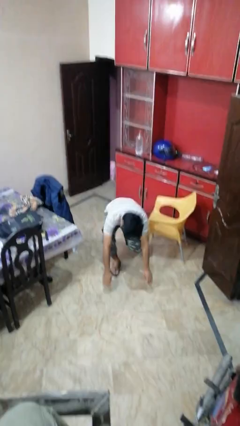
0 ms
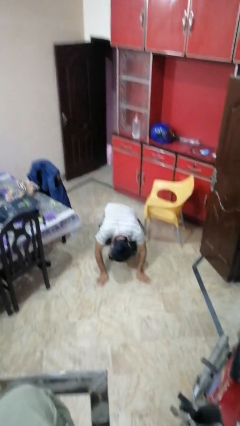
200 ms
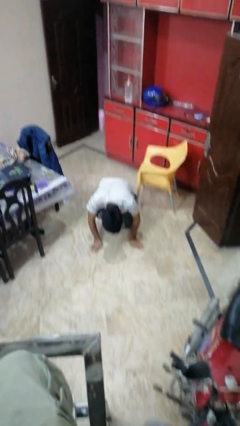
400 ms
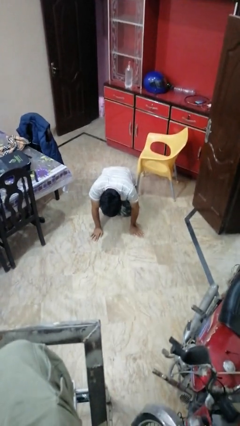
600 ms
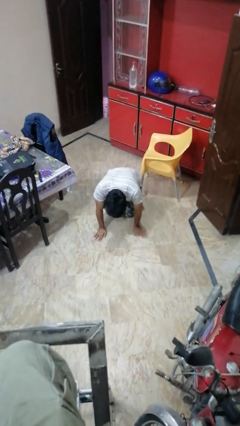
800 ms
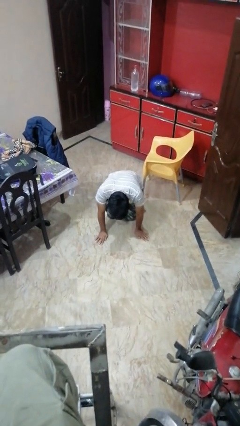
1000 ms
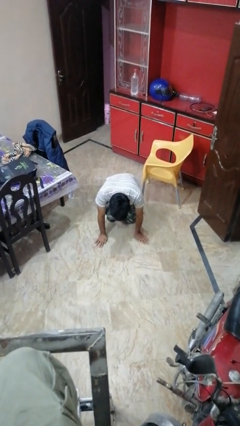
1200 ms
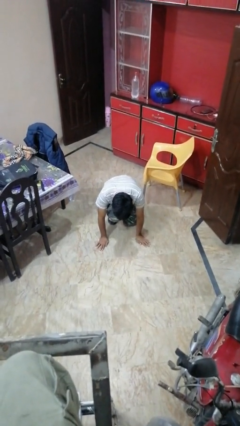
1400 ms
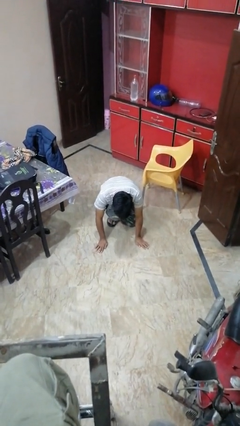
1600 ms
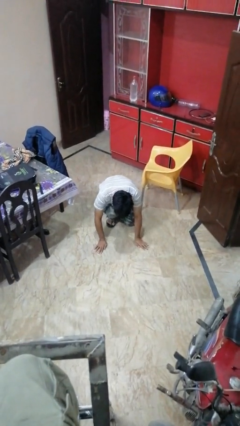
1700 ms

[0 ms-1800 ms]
person trips on object on floor

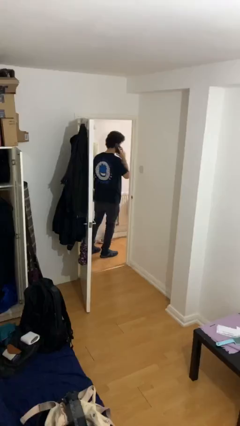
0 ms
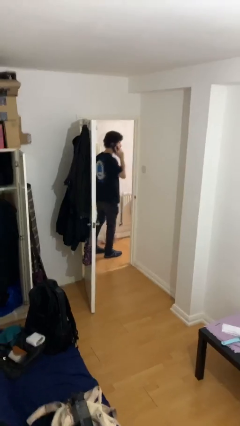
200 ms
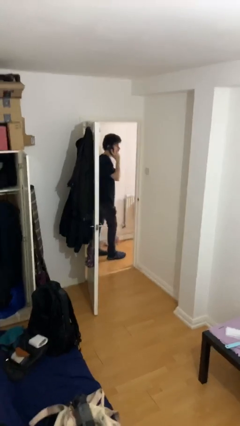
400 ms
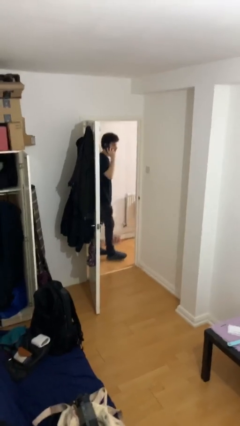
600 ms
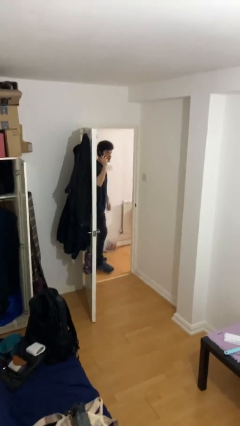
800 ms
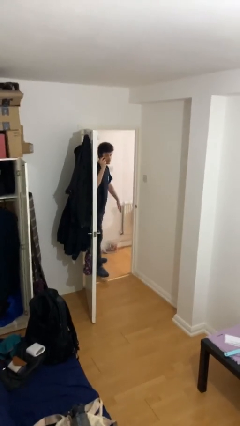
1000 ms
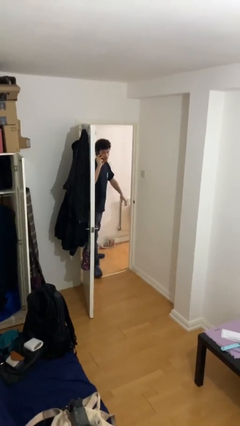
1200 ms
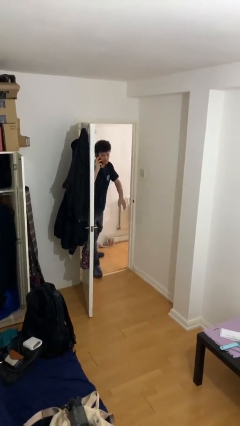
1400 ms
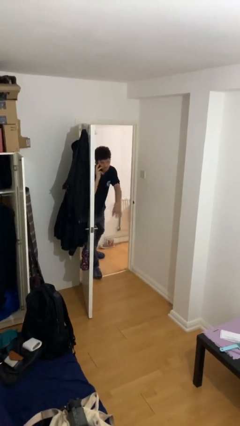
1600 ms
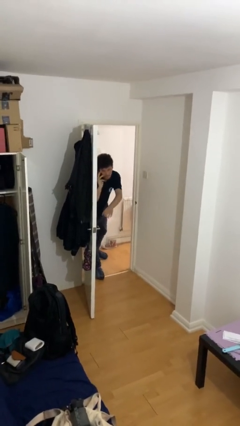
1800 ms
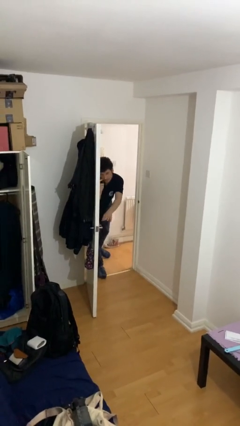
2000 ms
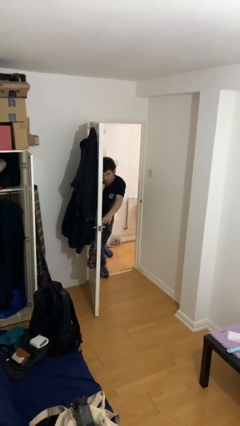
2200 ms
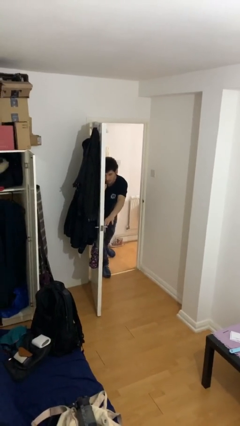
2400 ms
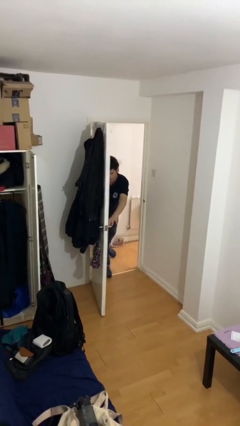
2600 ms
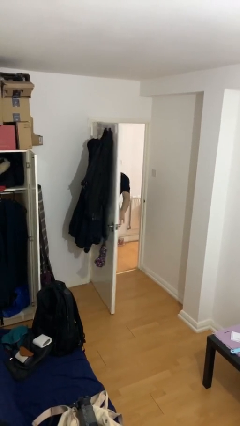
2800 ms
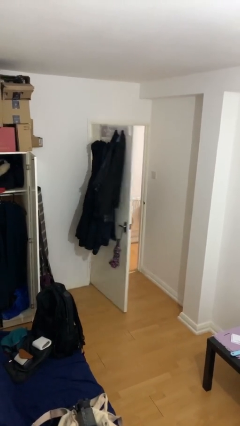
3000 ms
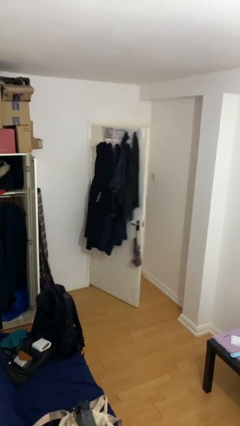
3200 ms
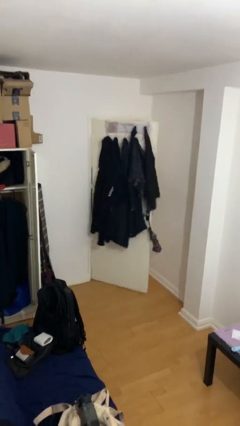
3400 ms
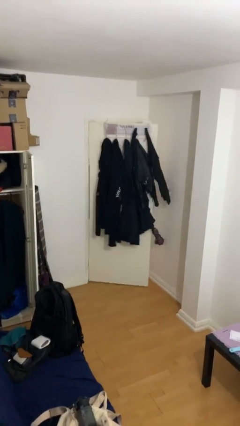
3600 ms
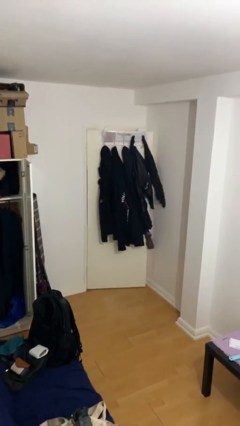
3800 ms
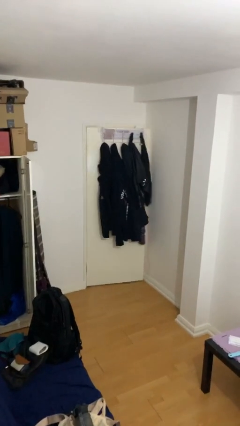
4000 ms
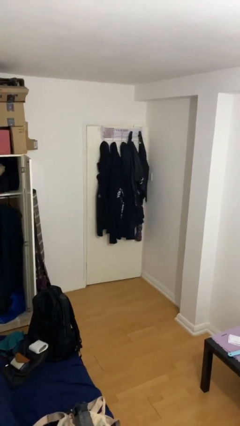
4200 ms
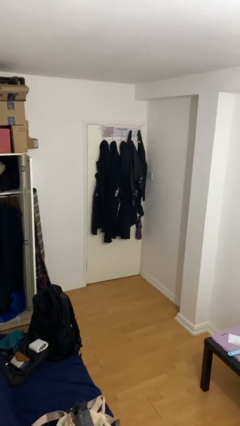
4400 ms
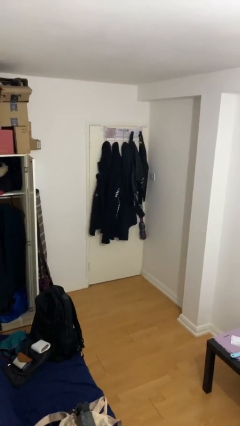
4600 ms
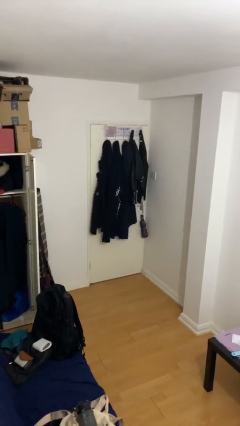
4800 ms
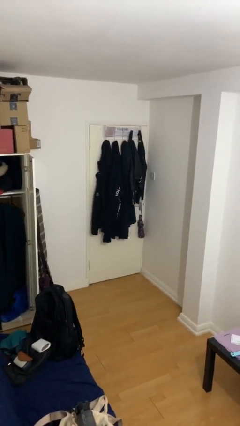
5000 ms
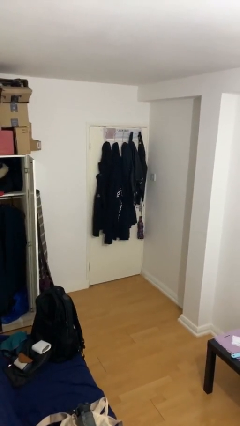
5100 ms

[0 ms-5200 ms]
person closes facility door

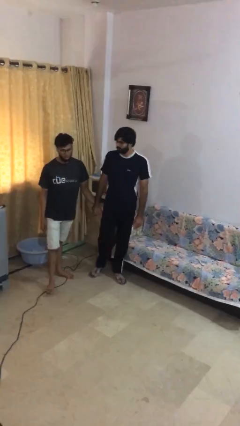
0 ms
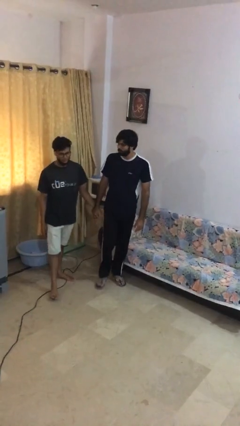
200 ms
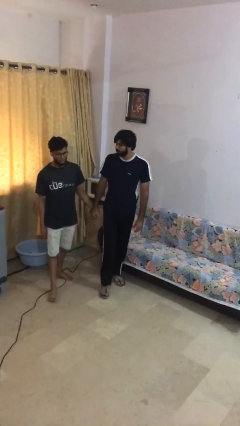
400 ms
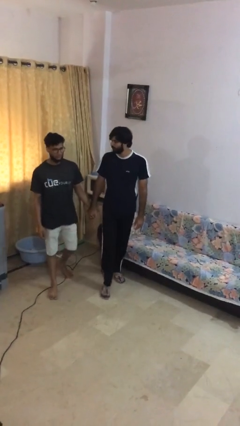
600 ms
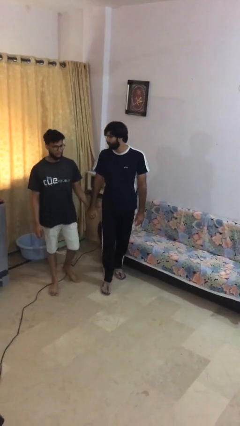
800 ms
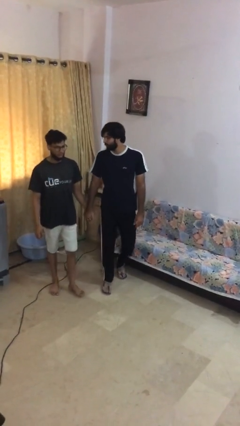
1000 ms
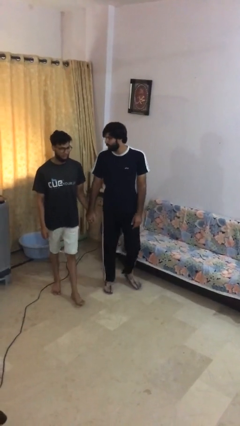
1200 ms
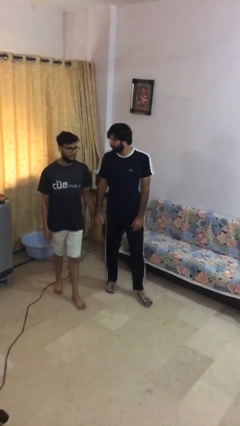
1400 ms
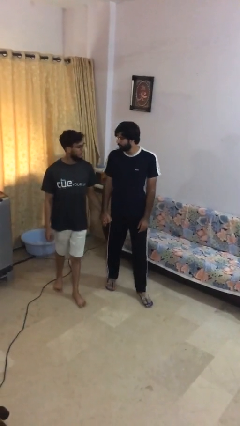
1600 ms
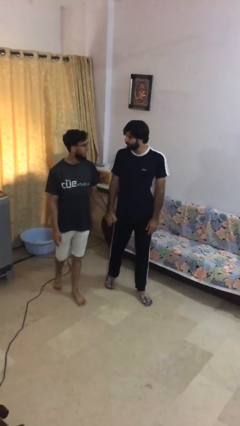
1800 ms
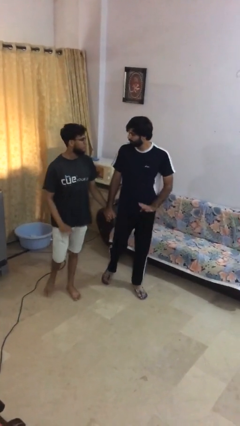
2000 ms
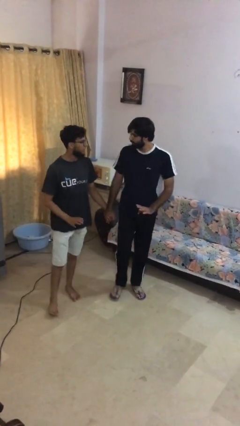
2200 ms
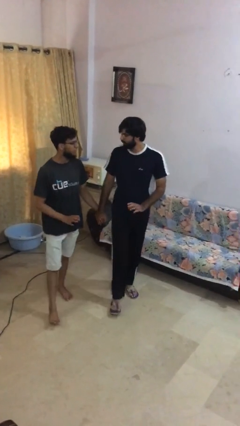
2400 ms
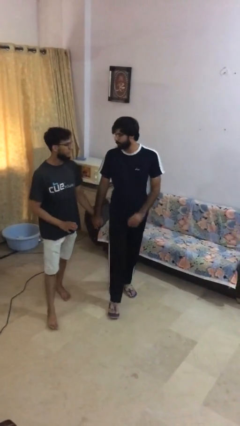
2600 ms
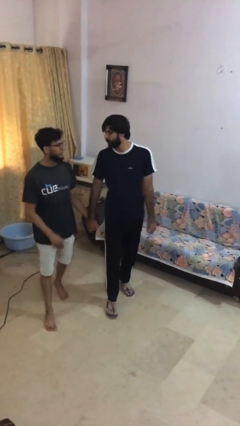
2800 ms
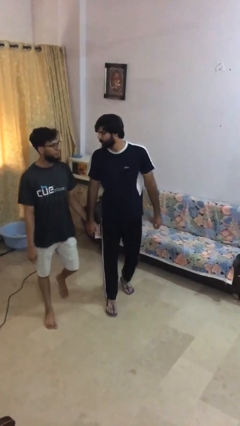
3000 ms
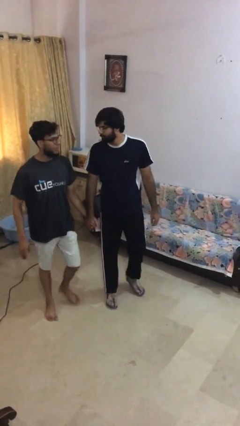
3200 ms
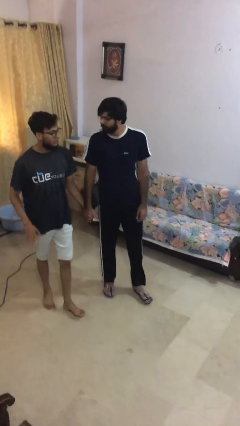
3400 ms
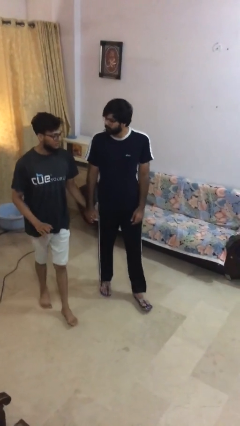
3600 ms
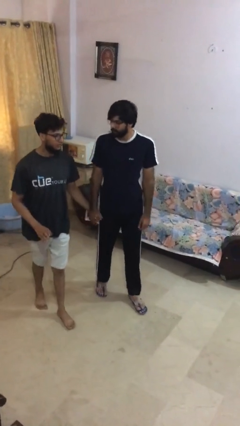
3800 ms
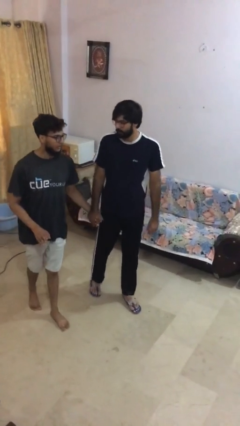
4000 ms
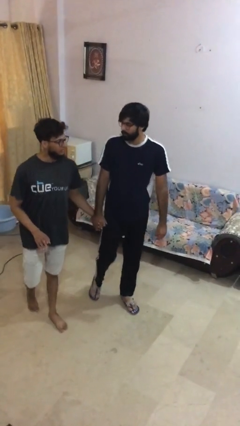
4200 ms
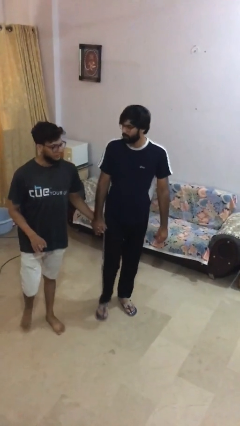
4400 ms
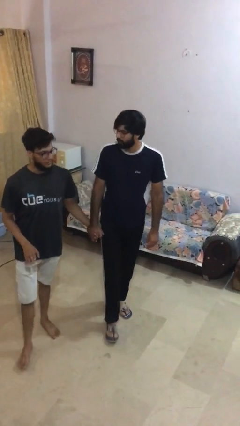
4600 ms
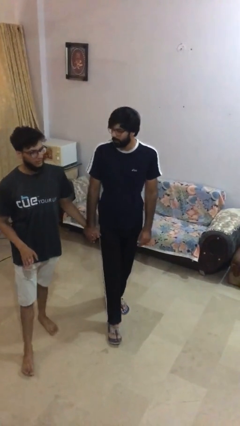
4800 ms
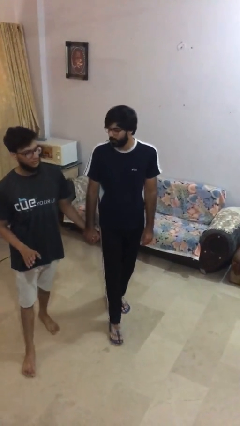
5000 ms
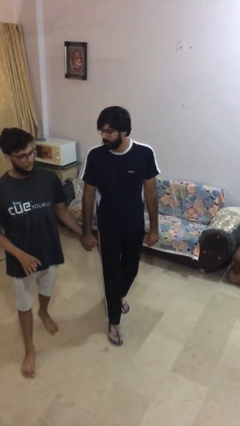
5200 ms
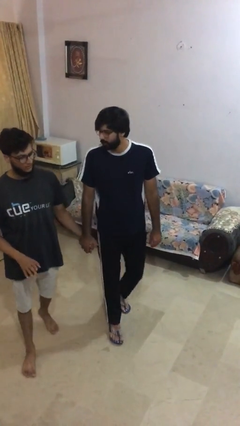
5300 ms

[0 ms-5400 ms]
person holds hand

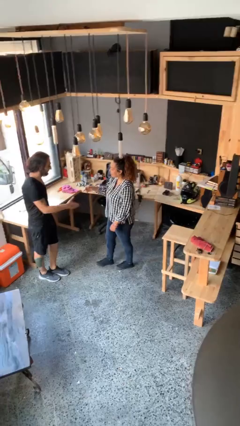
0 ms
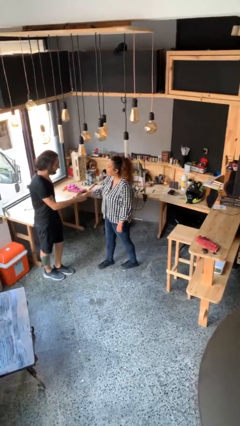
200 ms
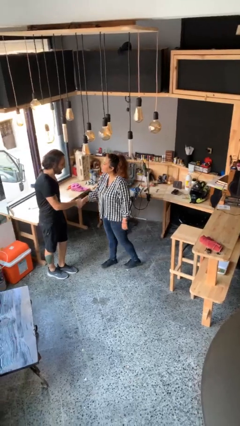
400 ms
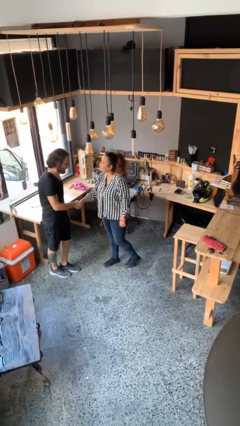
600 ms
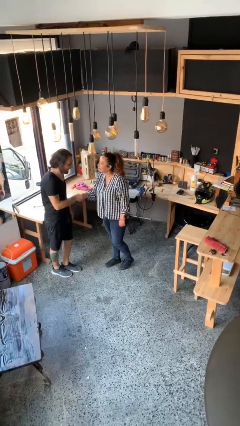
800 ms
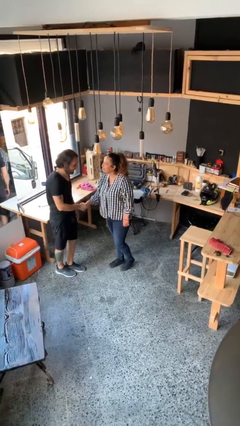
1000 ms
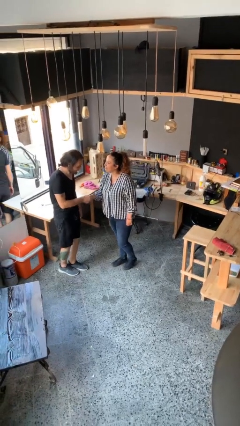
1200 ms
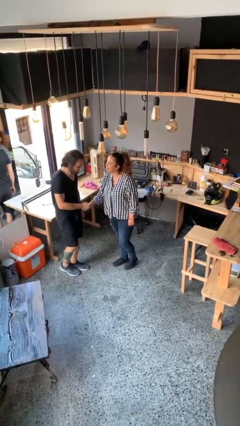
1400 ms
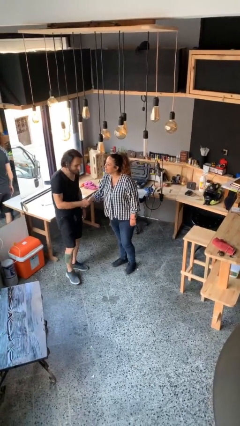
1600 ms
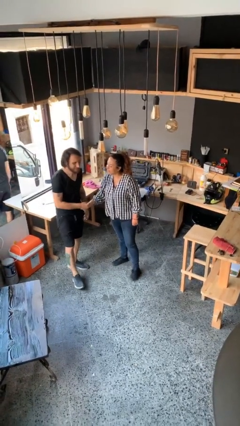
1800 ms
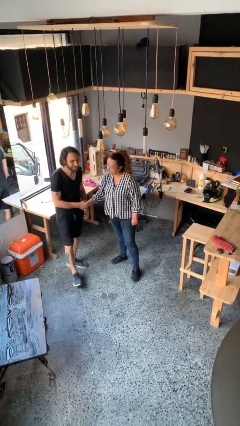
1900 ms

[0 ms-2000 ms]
person shakes hand

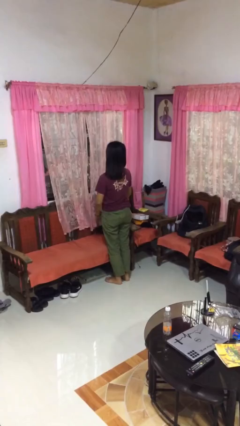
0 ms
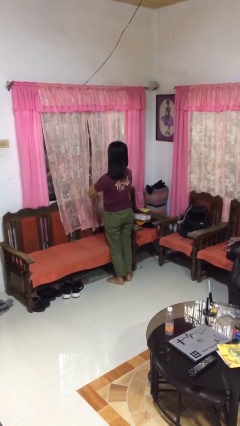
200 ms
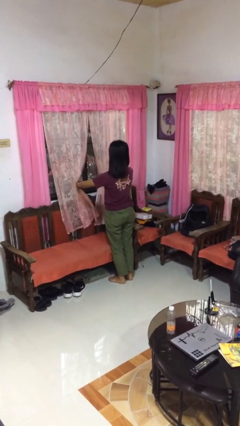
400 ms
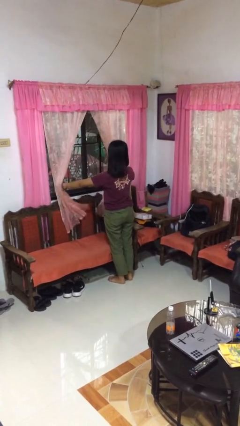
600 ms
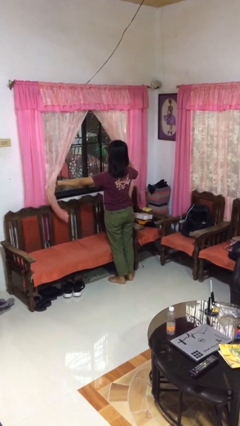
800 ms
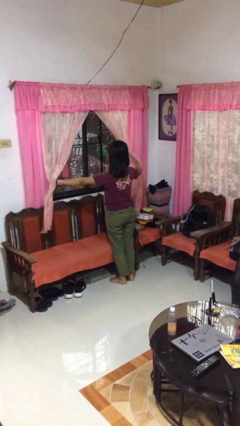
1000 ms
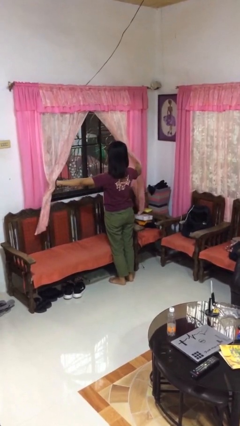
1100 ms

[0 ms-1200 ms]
person opens curtains

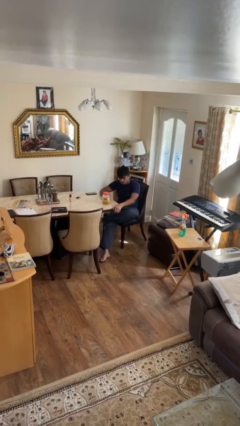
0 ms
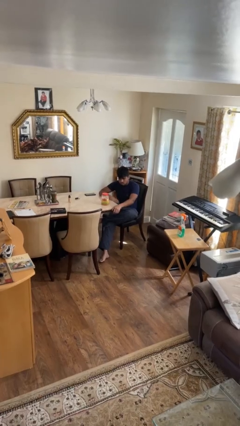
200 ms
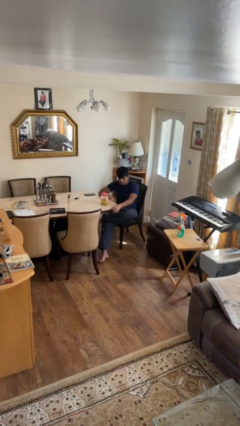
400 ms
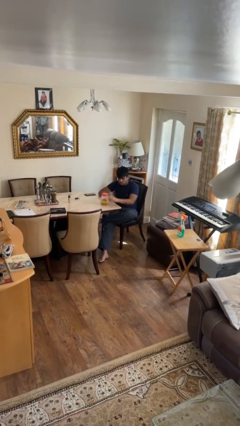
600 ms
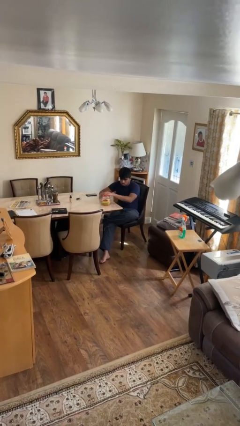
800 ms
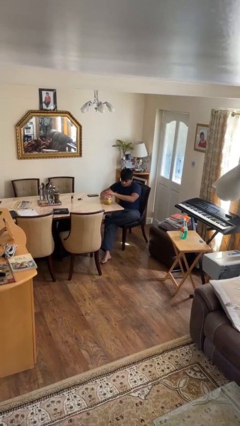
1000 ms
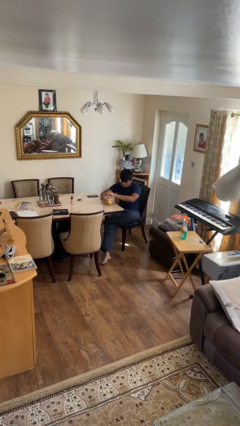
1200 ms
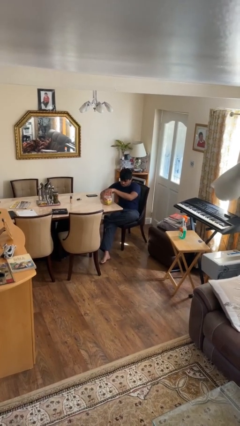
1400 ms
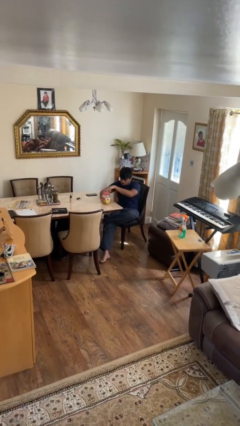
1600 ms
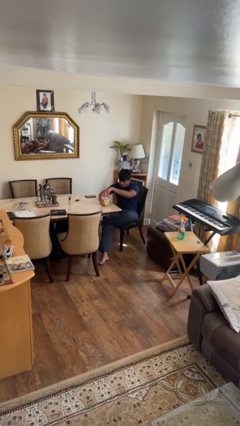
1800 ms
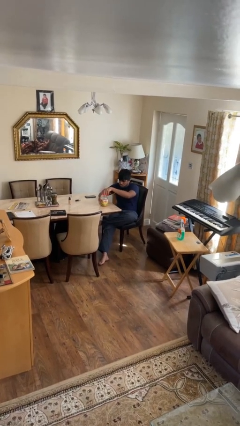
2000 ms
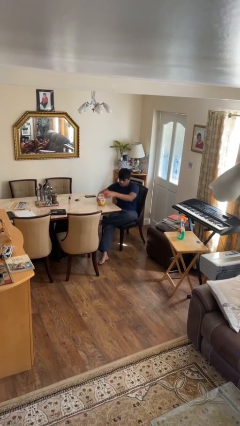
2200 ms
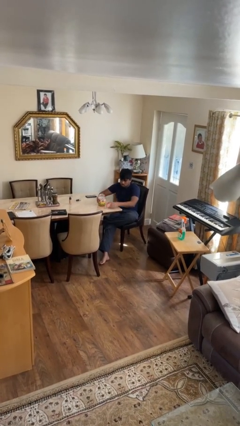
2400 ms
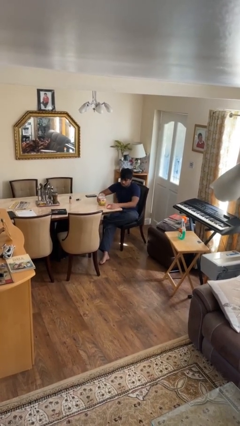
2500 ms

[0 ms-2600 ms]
person opens jar
